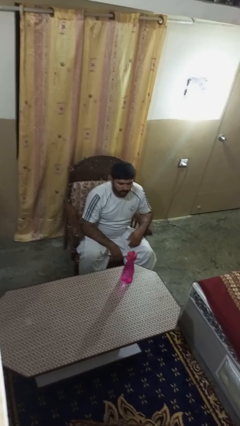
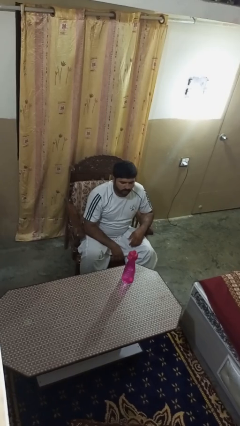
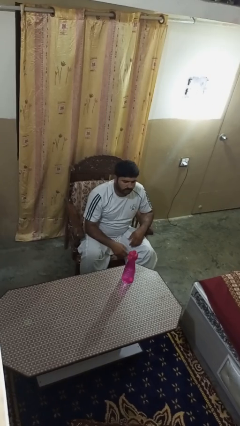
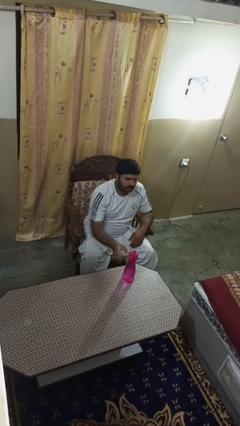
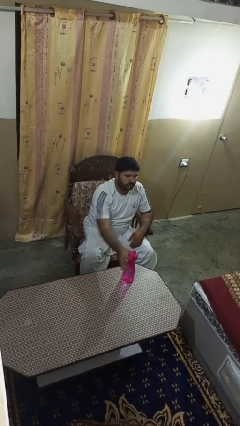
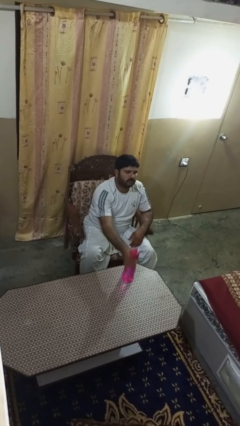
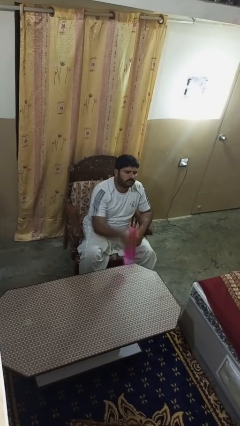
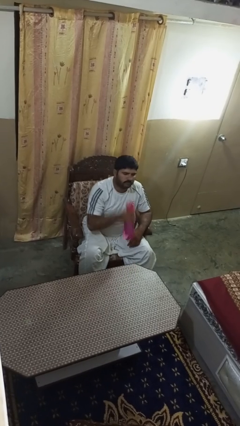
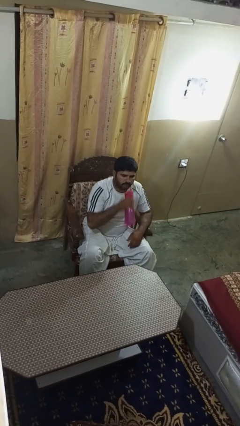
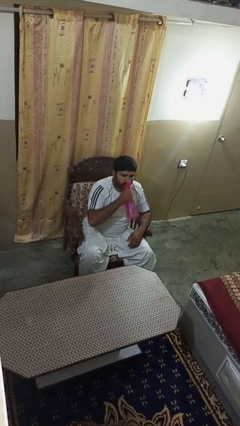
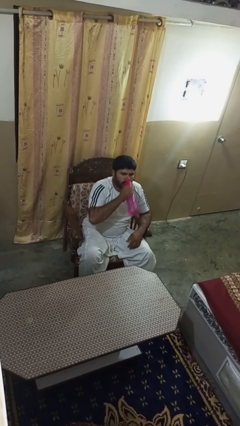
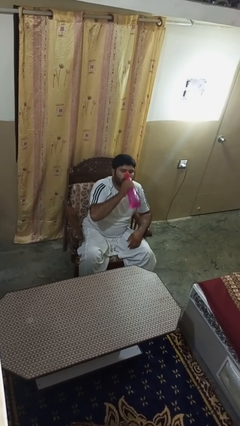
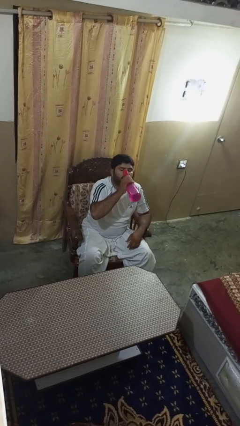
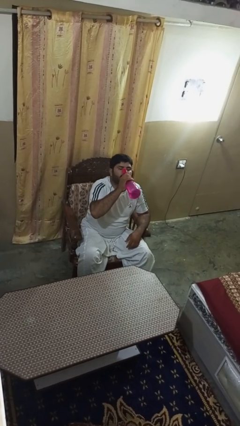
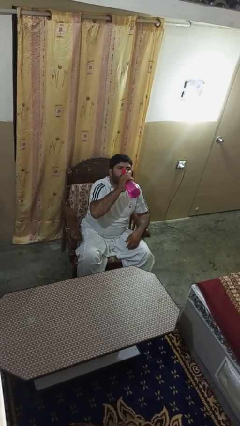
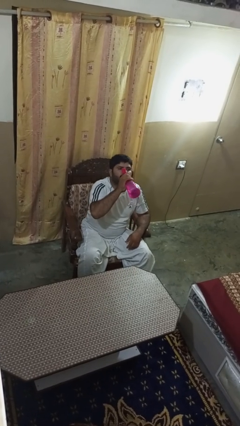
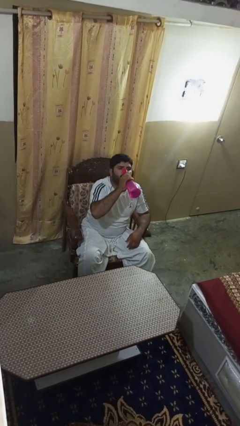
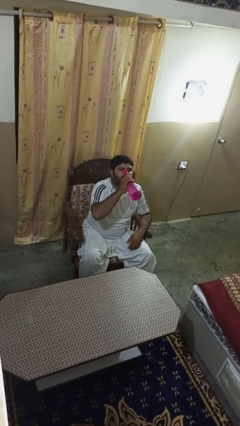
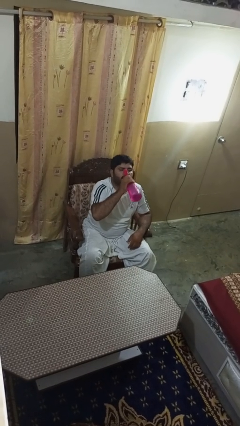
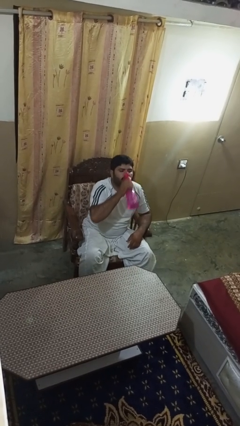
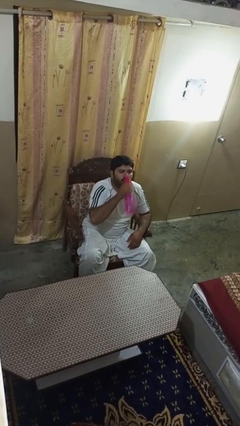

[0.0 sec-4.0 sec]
person drinks from bottle

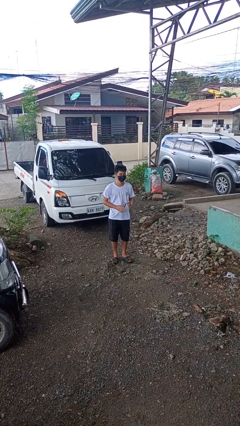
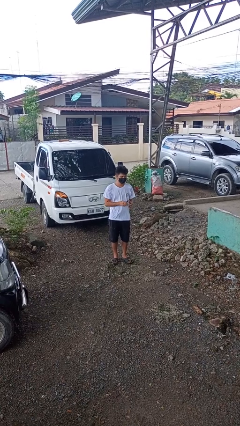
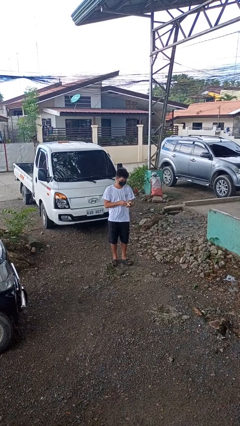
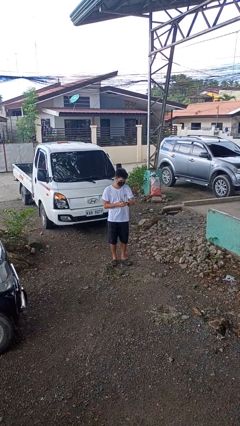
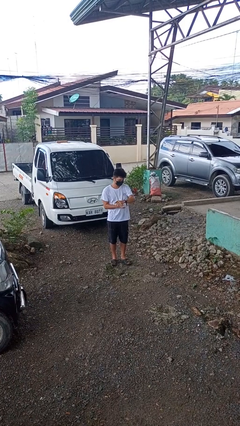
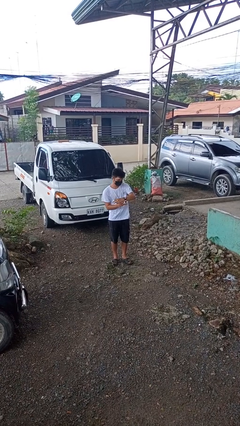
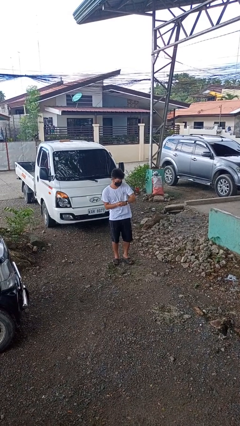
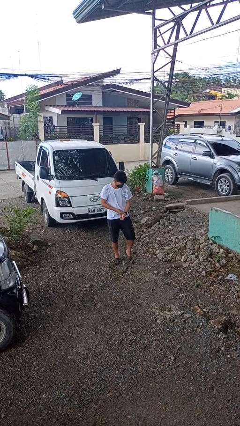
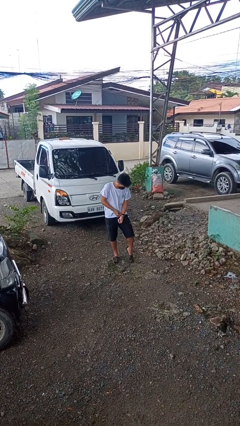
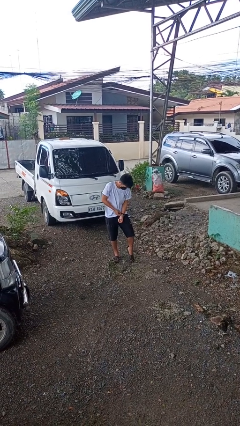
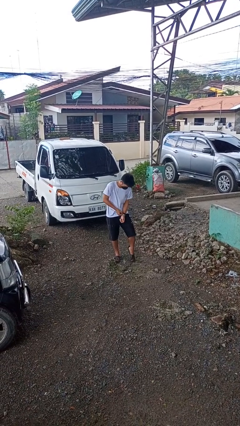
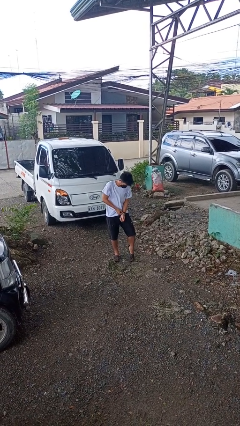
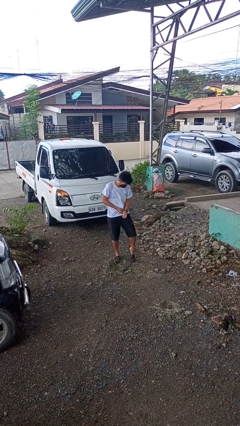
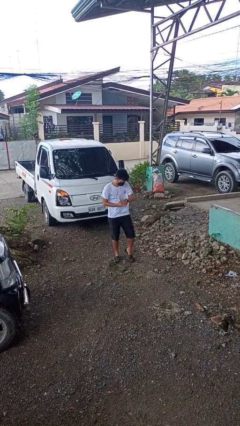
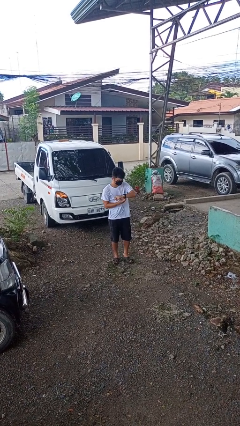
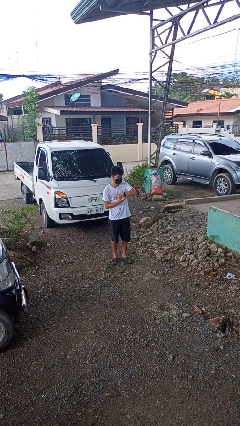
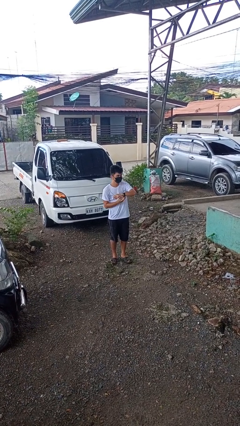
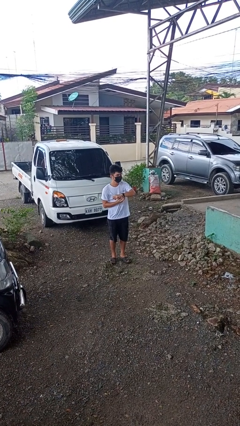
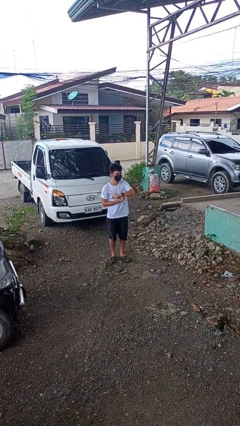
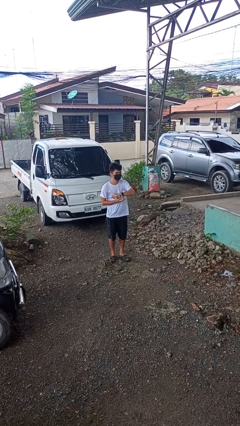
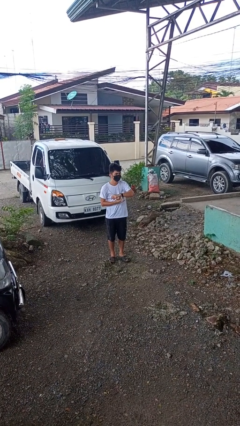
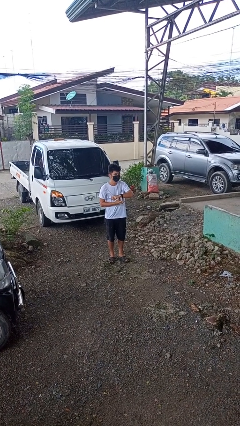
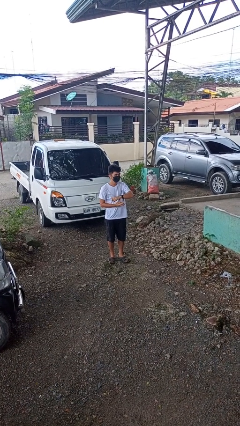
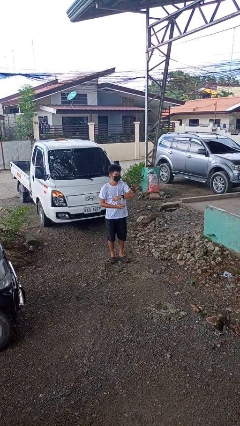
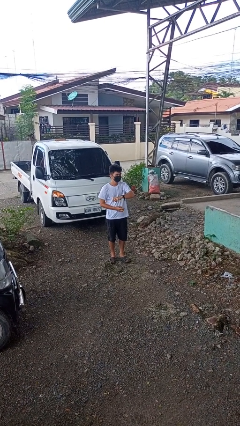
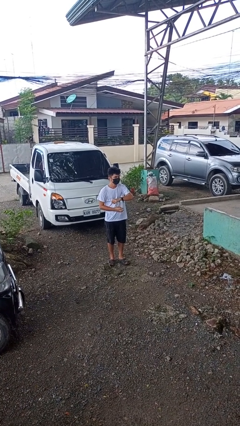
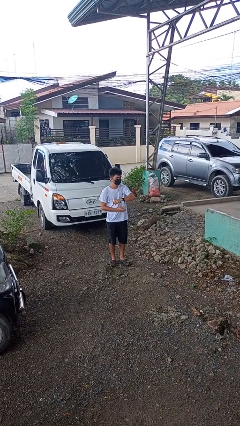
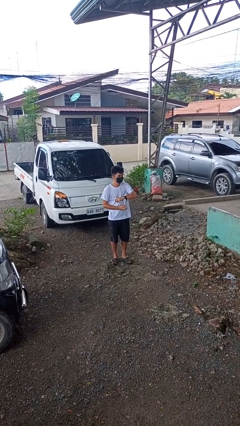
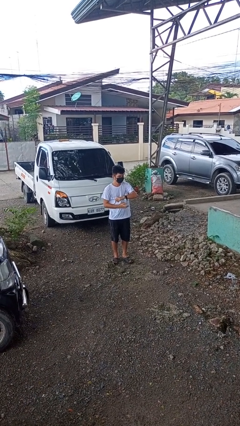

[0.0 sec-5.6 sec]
person puts on wristwatch

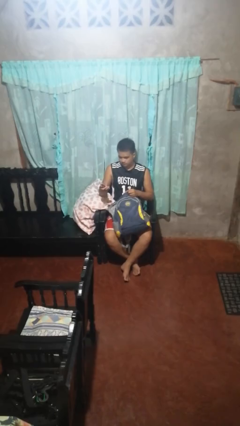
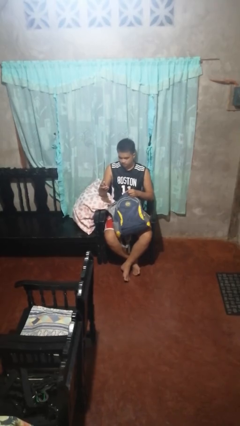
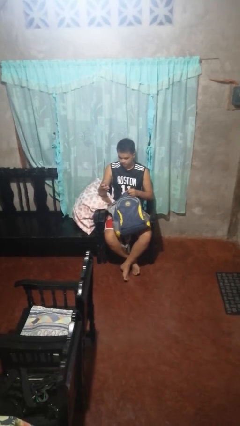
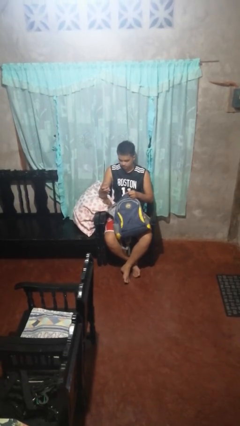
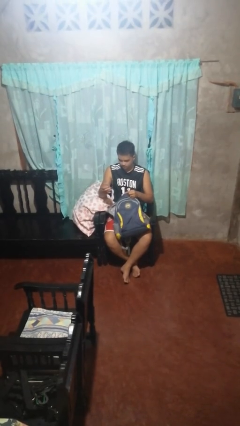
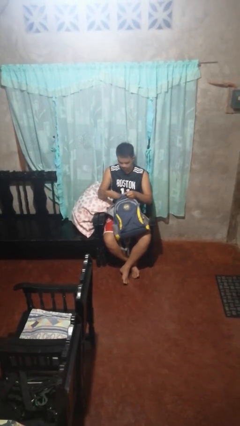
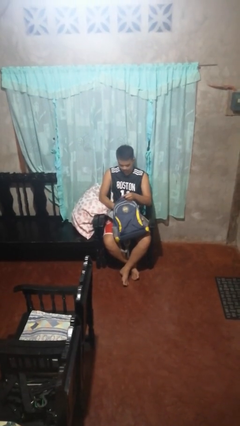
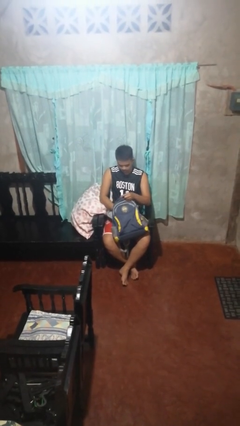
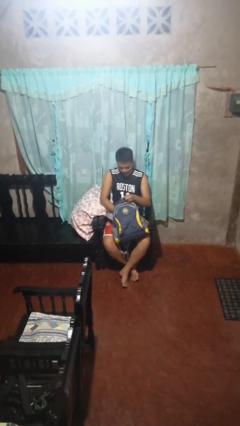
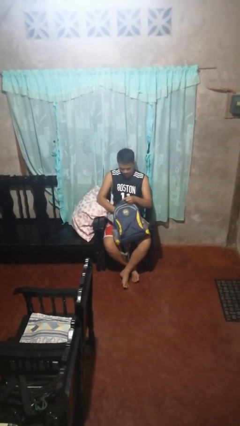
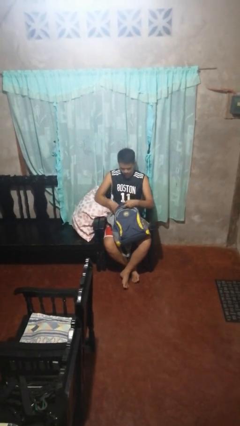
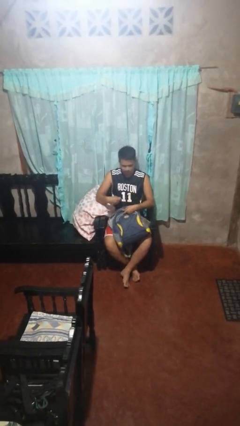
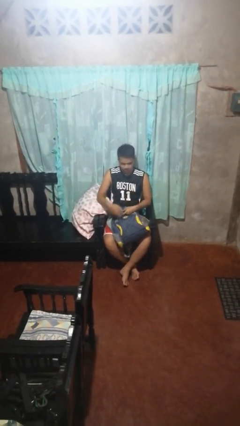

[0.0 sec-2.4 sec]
person puts object into backpack

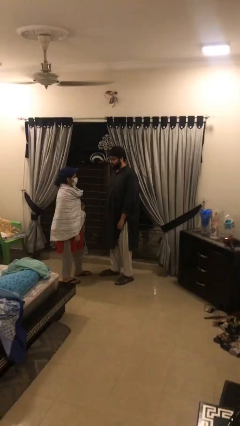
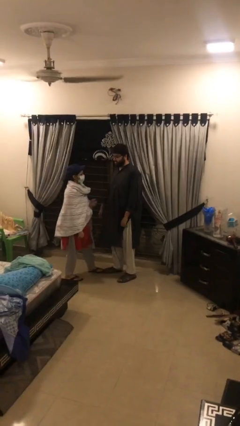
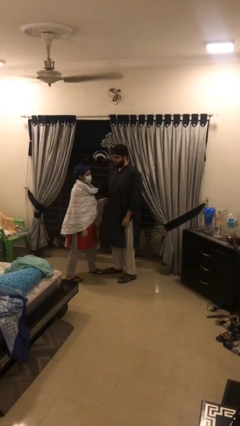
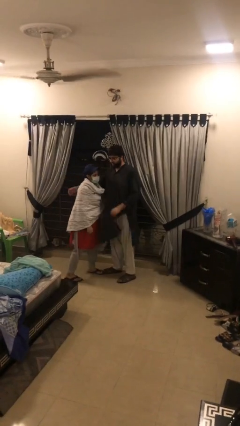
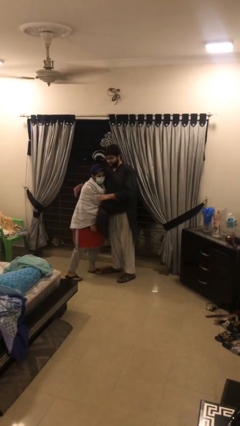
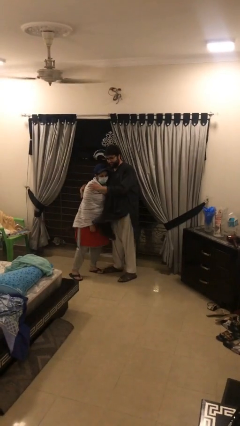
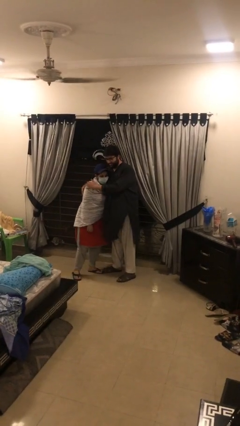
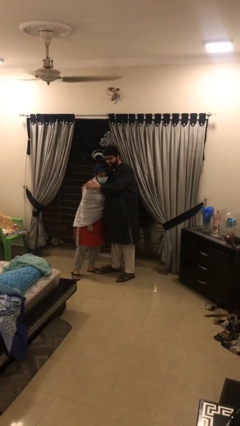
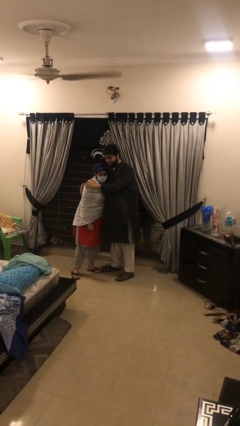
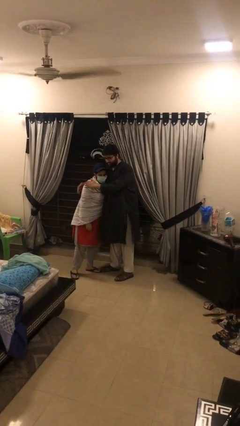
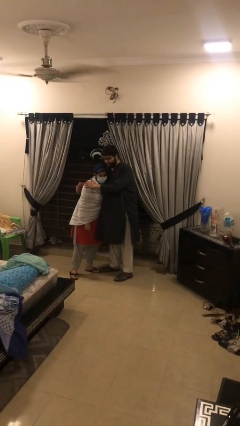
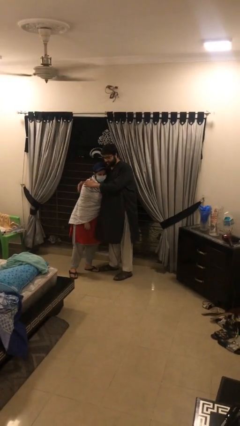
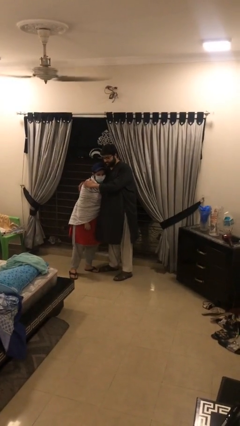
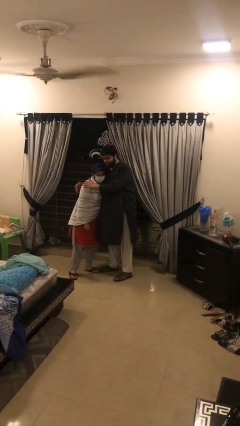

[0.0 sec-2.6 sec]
person embraces person

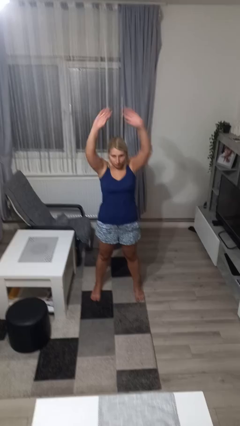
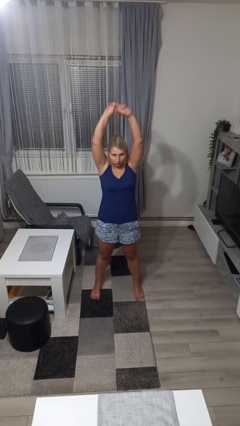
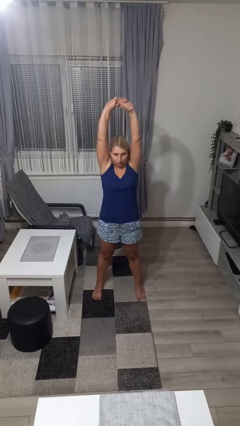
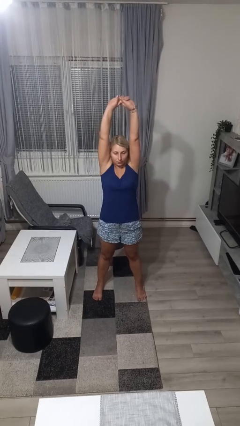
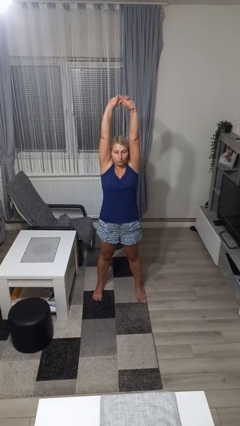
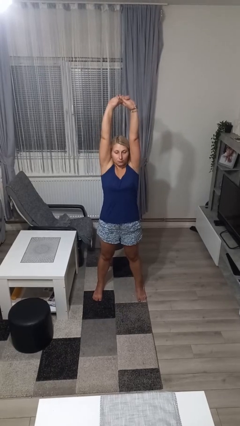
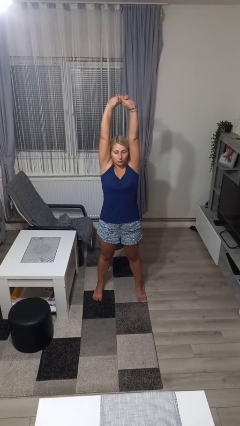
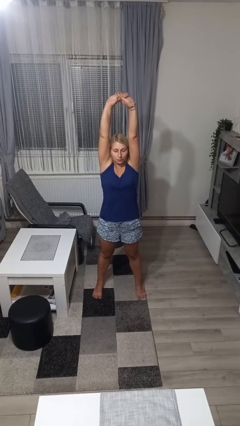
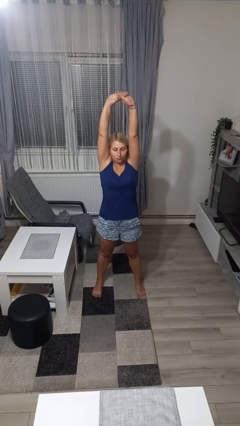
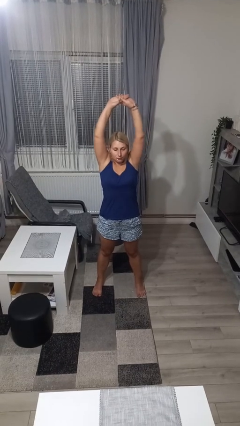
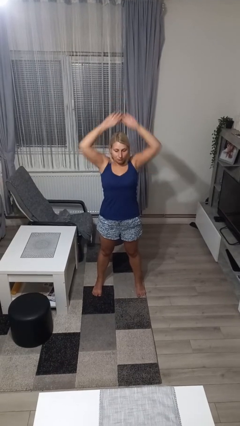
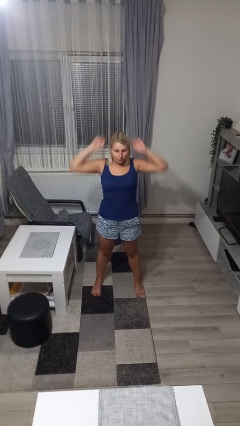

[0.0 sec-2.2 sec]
person stretches arms over head

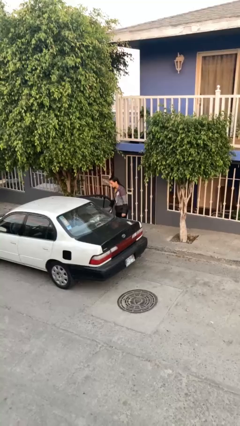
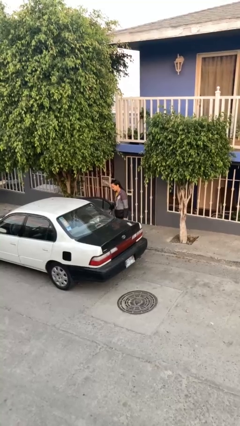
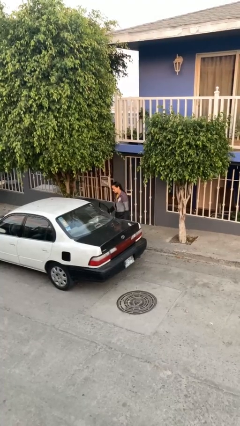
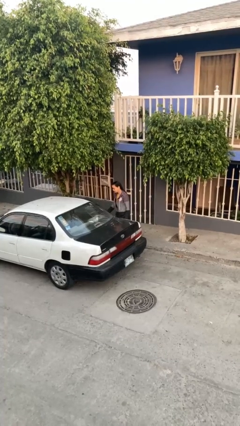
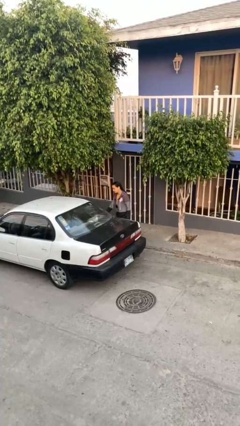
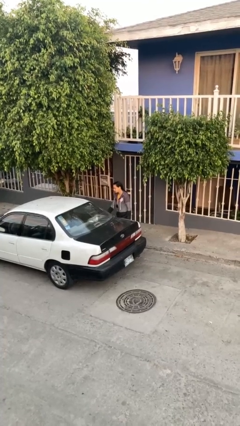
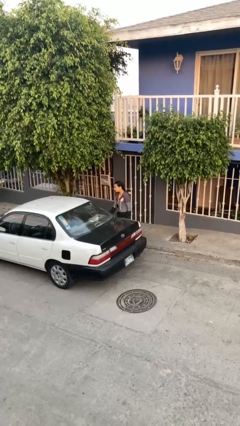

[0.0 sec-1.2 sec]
person closes car door
